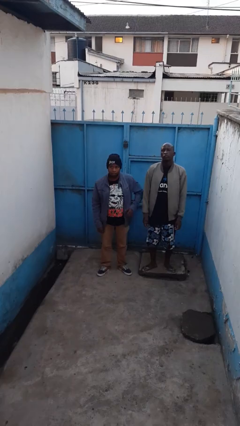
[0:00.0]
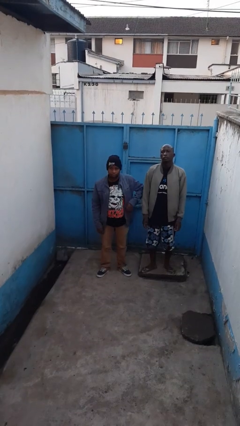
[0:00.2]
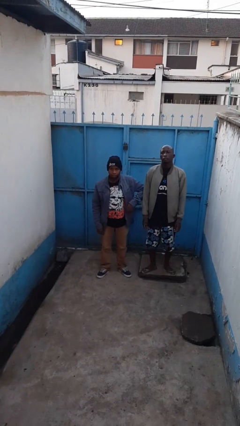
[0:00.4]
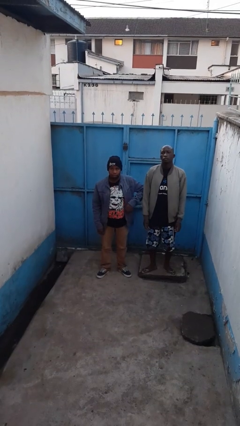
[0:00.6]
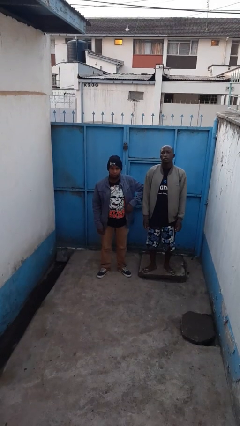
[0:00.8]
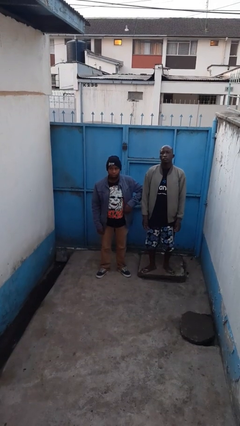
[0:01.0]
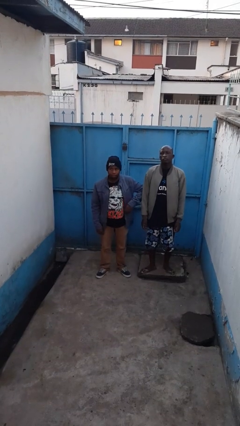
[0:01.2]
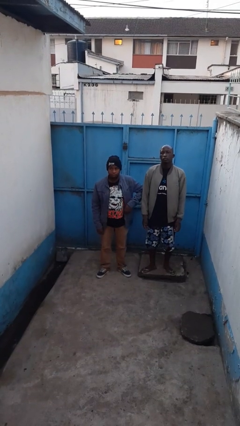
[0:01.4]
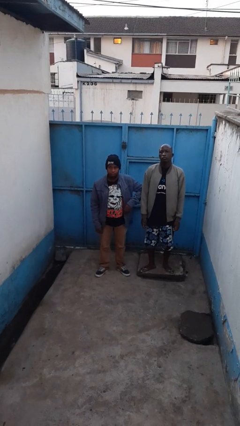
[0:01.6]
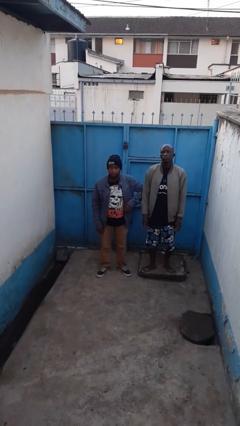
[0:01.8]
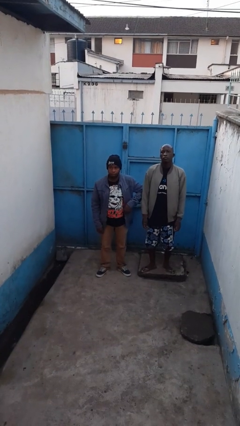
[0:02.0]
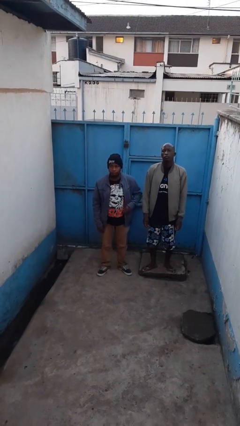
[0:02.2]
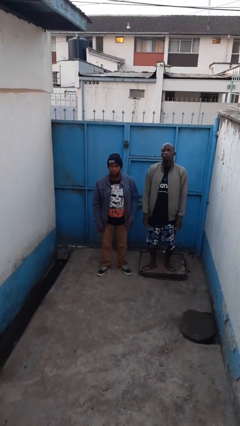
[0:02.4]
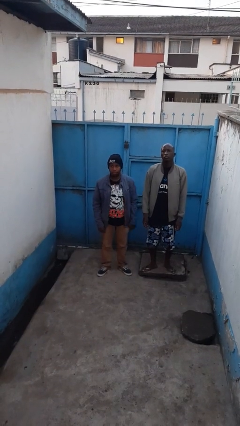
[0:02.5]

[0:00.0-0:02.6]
person nudges person with elbow

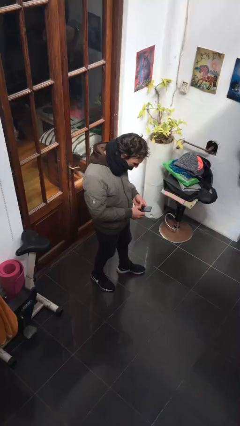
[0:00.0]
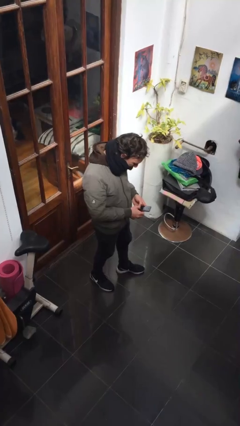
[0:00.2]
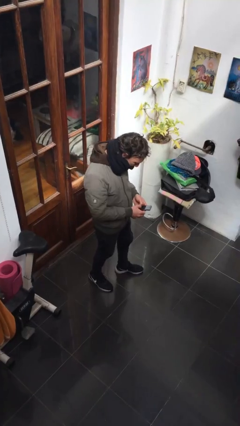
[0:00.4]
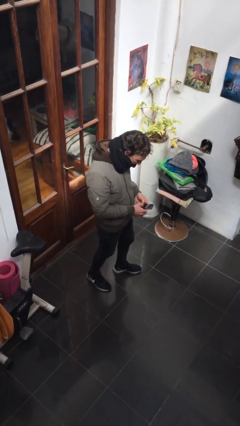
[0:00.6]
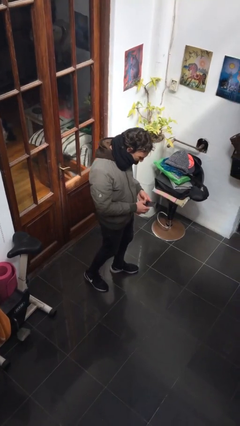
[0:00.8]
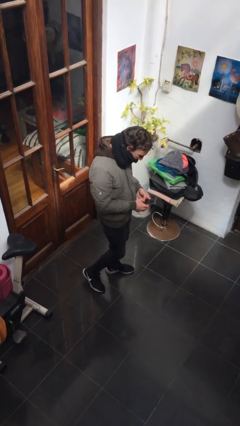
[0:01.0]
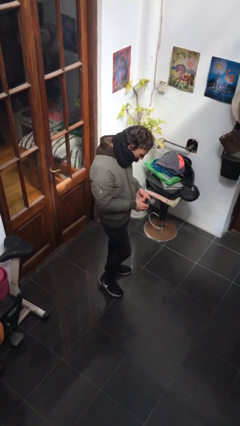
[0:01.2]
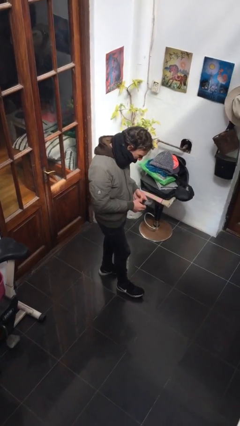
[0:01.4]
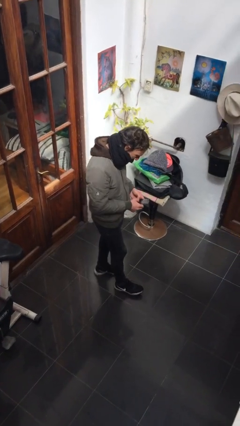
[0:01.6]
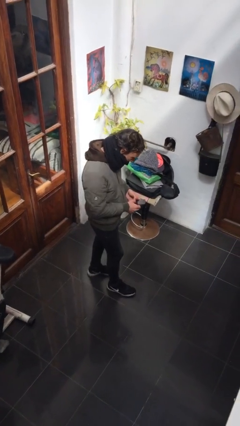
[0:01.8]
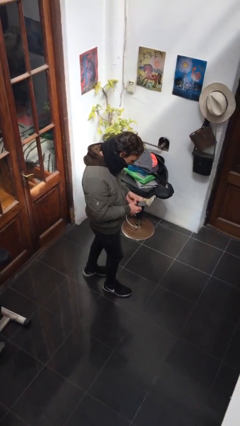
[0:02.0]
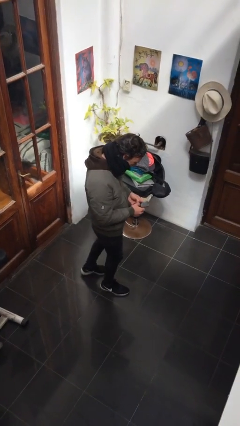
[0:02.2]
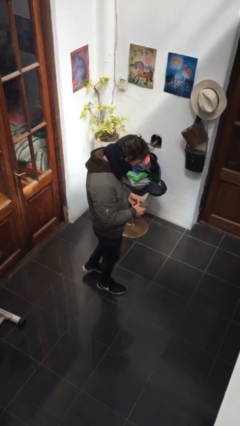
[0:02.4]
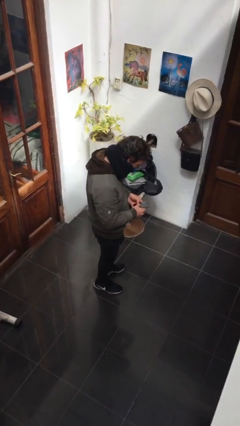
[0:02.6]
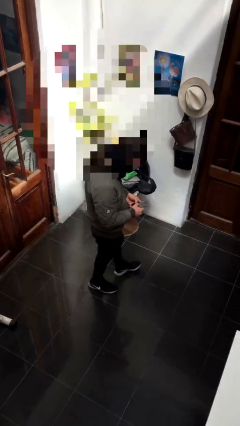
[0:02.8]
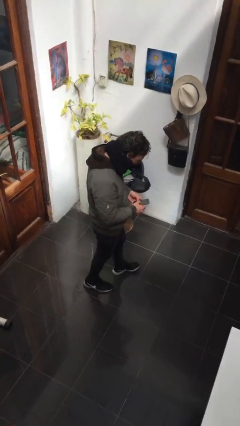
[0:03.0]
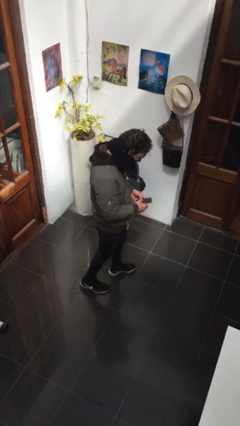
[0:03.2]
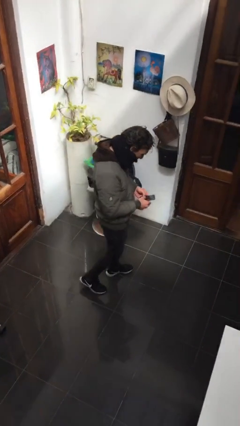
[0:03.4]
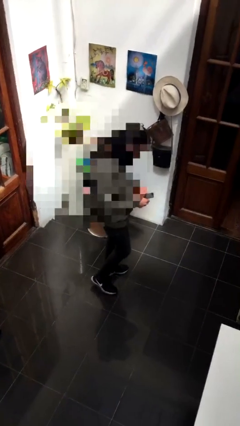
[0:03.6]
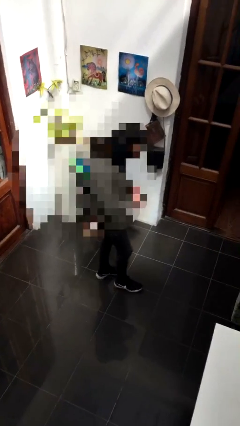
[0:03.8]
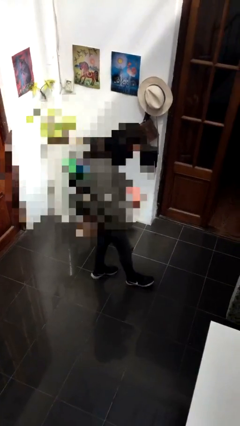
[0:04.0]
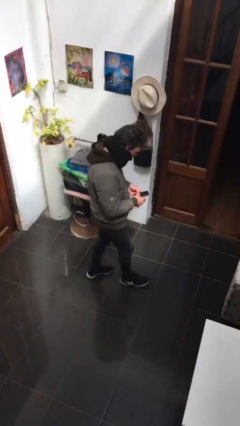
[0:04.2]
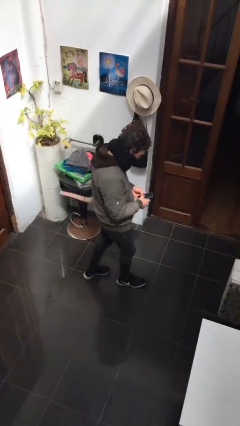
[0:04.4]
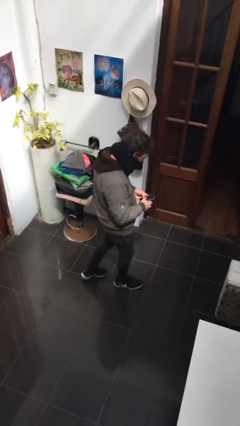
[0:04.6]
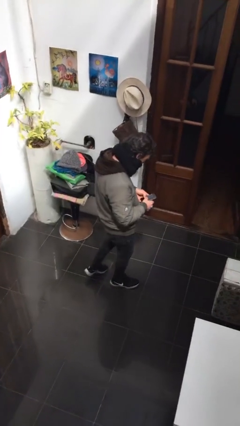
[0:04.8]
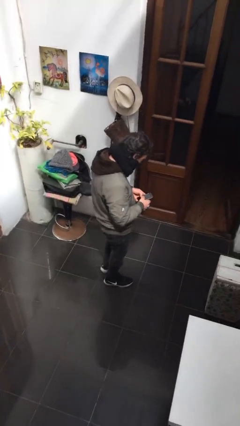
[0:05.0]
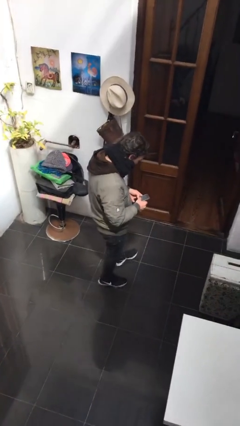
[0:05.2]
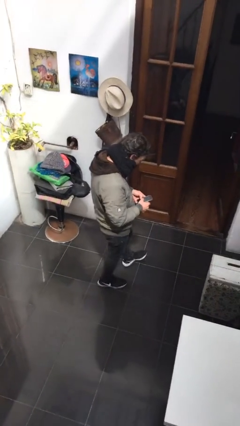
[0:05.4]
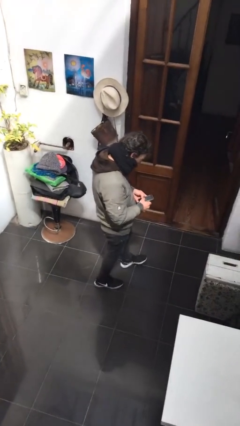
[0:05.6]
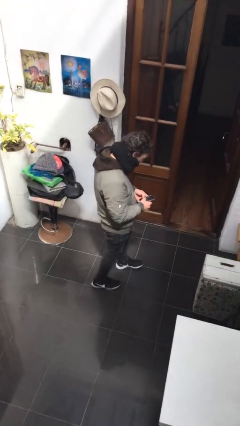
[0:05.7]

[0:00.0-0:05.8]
person texts on phone

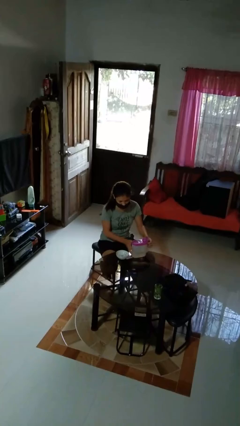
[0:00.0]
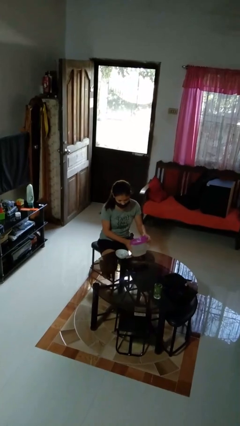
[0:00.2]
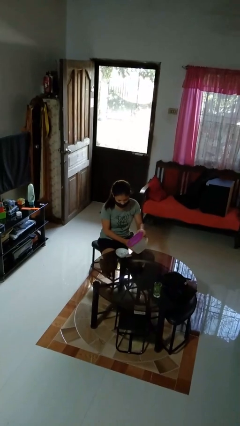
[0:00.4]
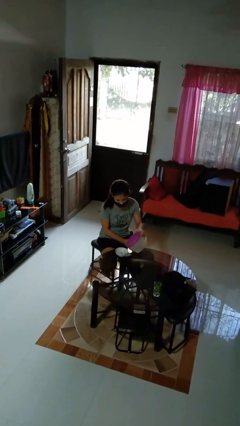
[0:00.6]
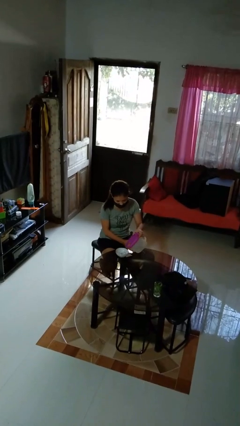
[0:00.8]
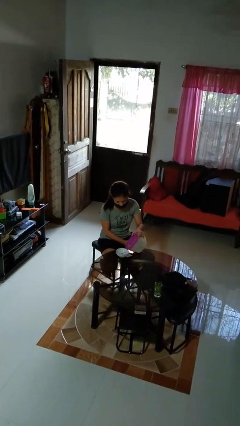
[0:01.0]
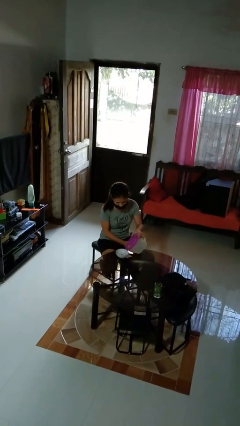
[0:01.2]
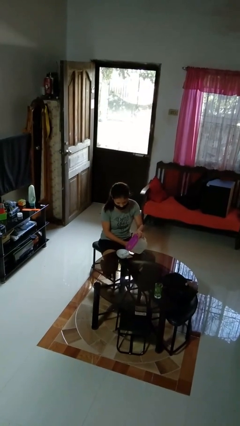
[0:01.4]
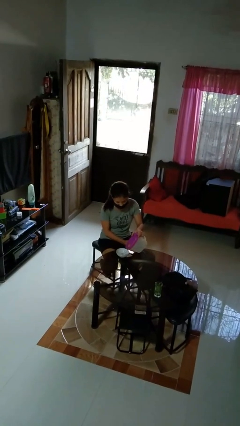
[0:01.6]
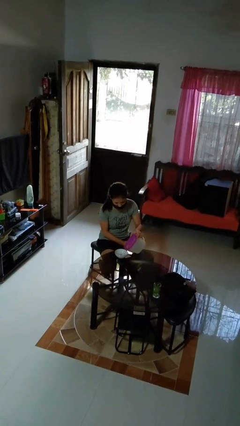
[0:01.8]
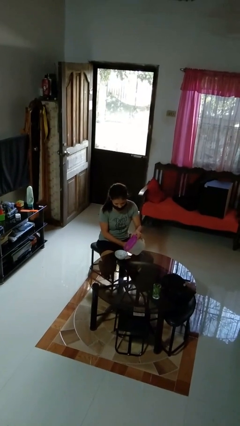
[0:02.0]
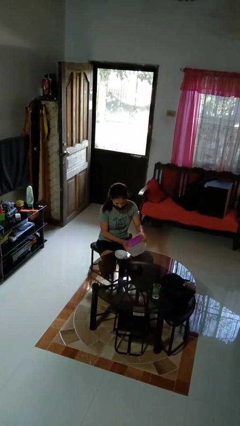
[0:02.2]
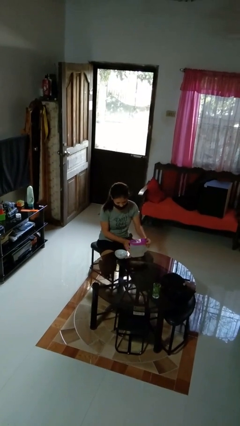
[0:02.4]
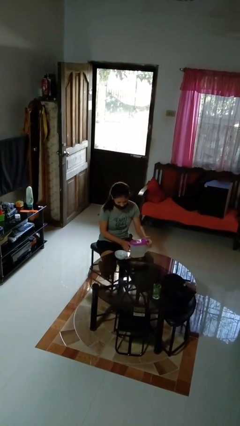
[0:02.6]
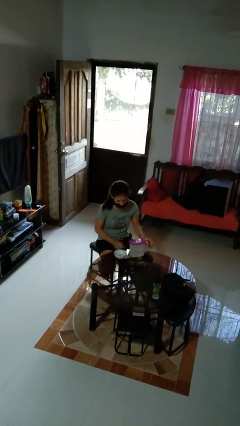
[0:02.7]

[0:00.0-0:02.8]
person pours into bowl

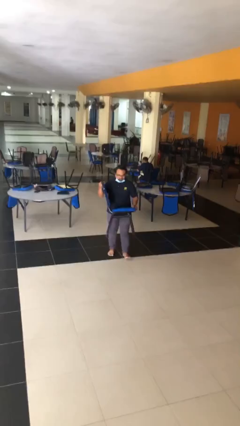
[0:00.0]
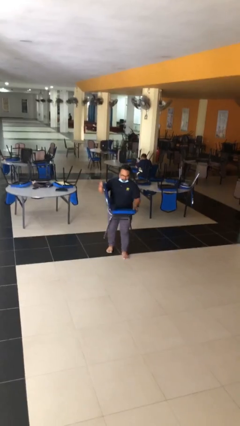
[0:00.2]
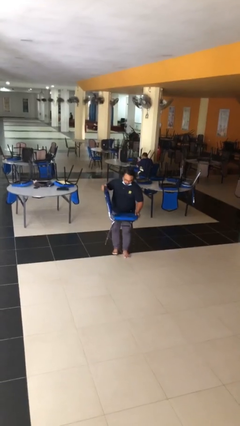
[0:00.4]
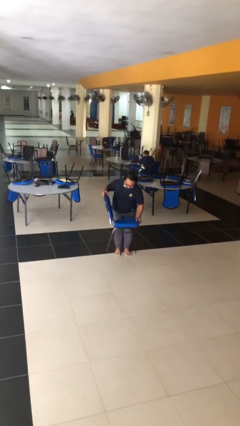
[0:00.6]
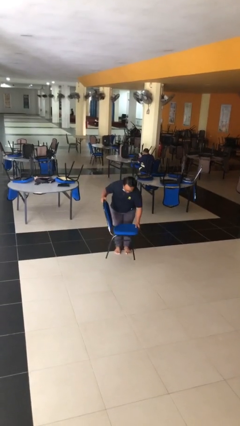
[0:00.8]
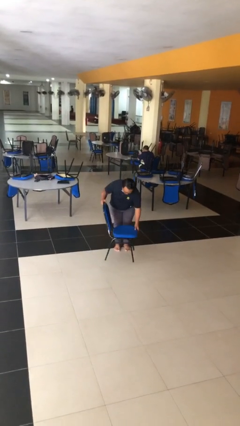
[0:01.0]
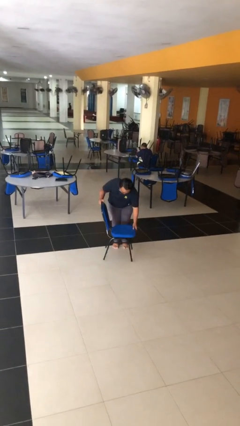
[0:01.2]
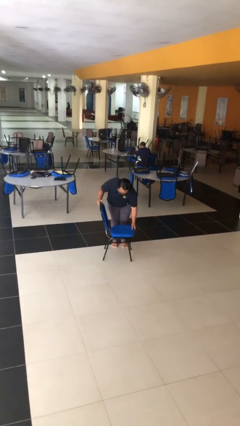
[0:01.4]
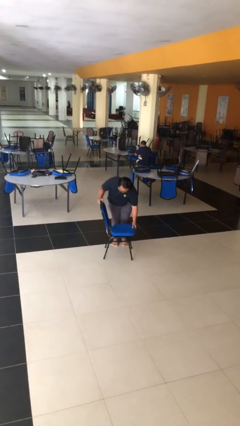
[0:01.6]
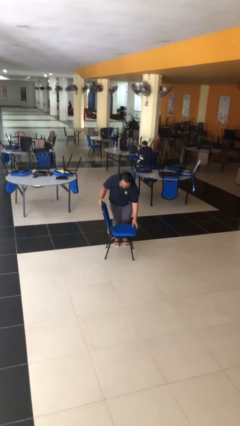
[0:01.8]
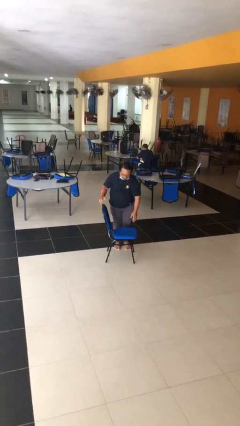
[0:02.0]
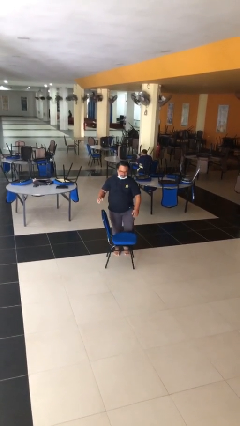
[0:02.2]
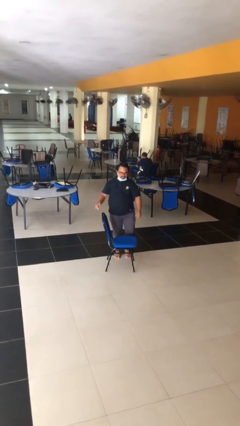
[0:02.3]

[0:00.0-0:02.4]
person puts down object on floor

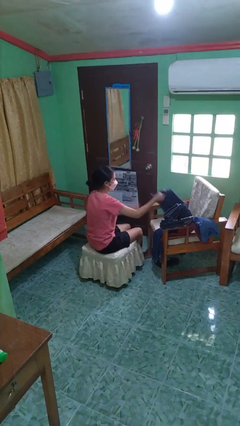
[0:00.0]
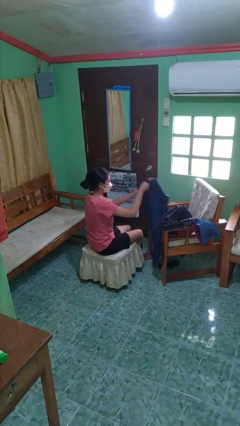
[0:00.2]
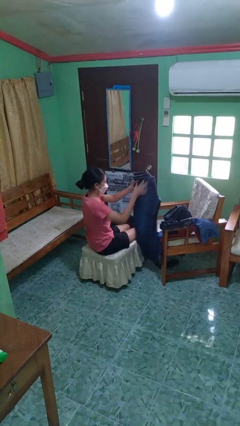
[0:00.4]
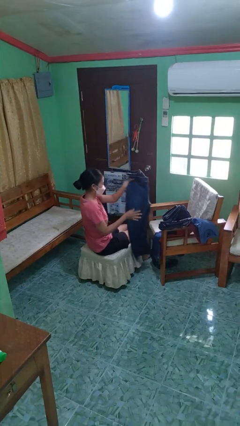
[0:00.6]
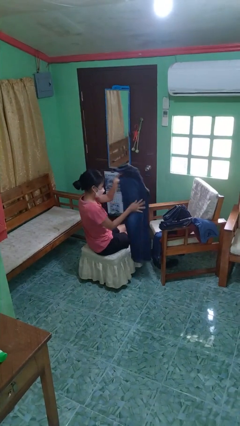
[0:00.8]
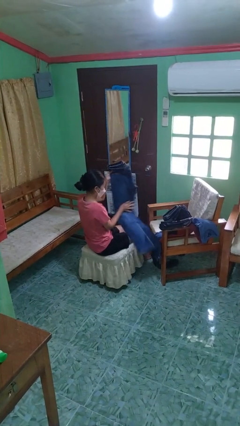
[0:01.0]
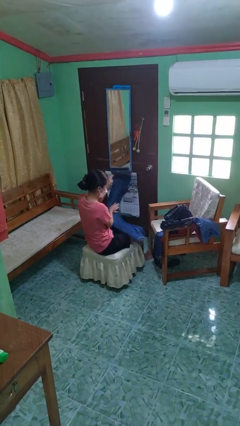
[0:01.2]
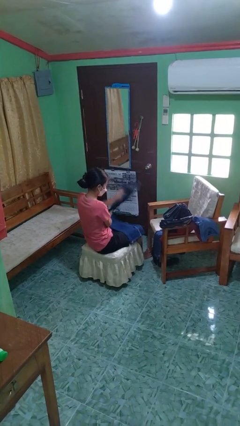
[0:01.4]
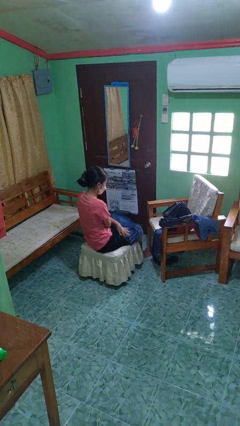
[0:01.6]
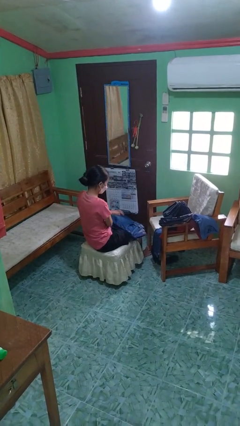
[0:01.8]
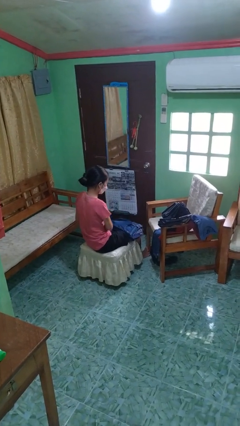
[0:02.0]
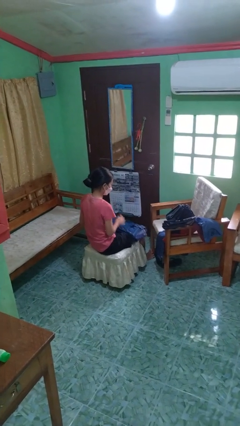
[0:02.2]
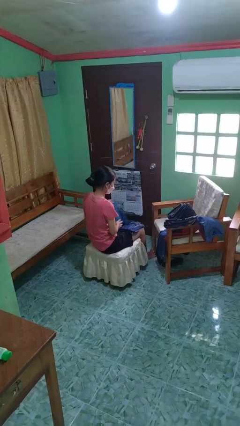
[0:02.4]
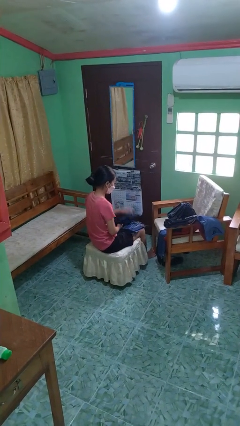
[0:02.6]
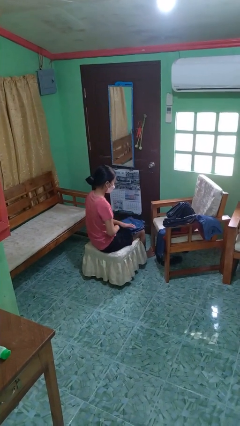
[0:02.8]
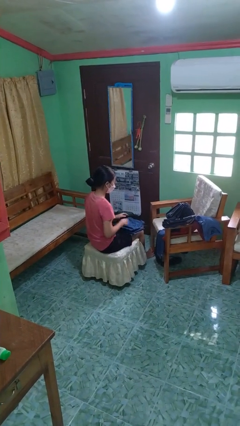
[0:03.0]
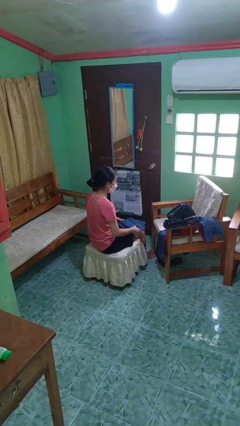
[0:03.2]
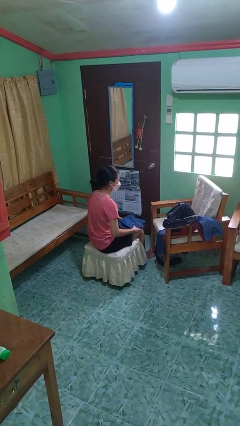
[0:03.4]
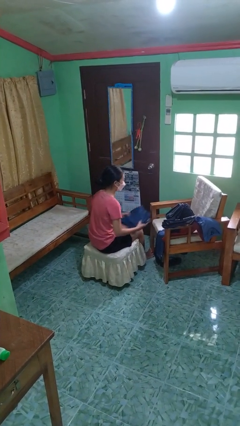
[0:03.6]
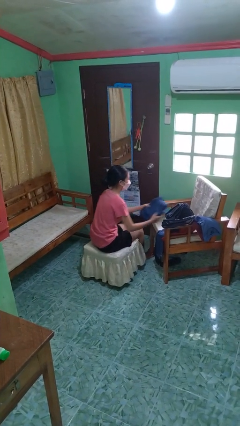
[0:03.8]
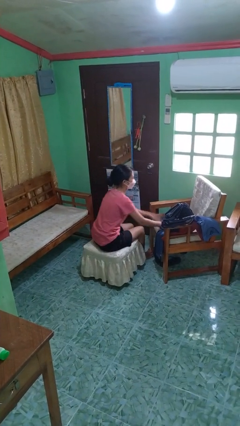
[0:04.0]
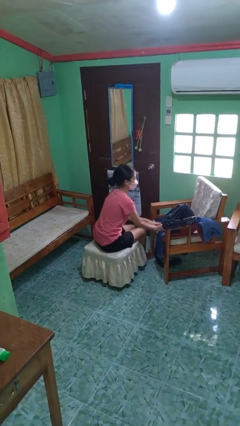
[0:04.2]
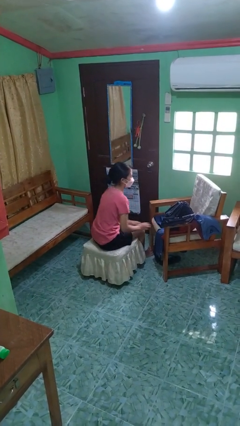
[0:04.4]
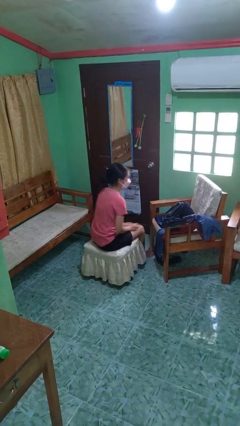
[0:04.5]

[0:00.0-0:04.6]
person folds pants
